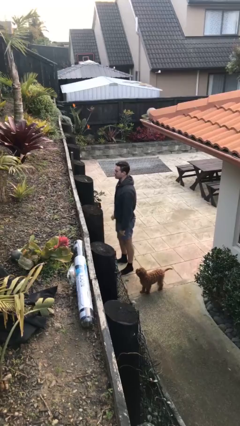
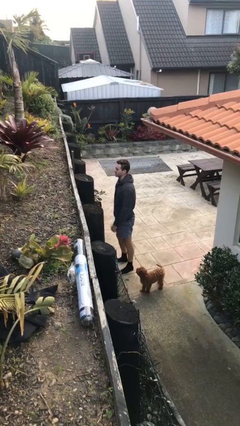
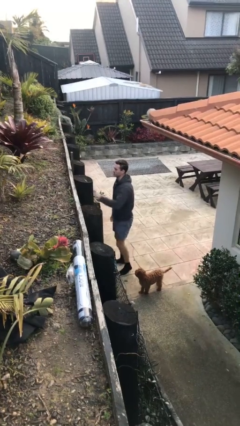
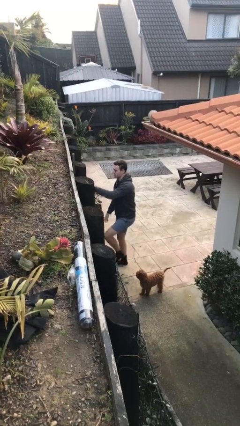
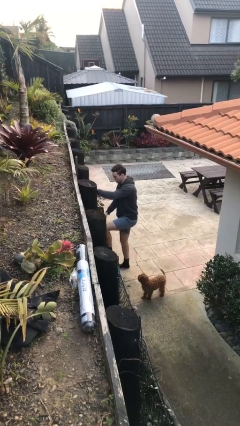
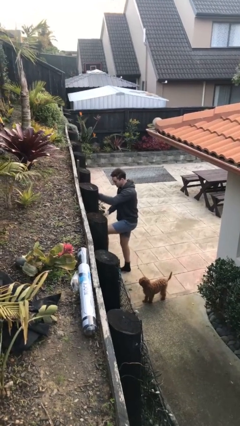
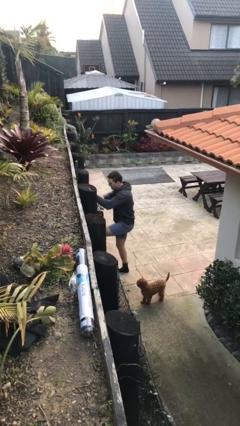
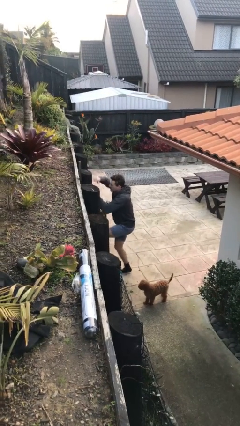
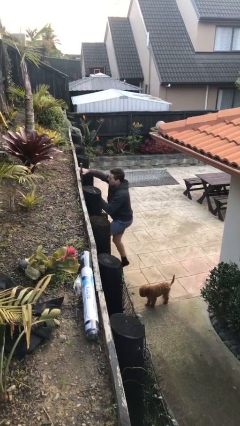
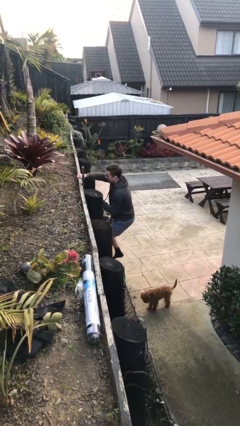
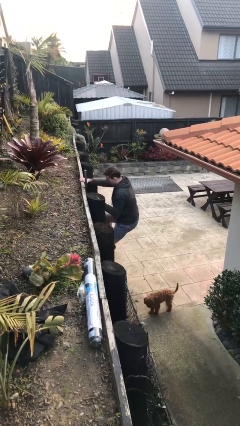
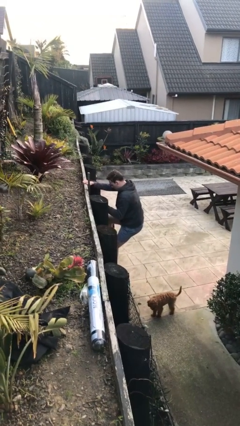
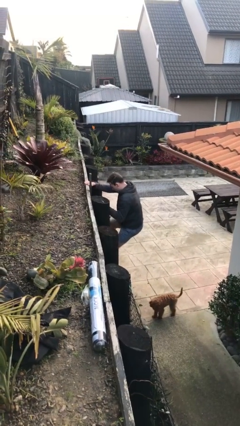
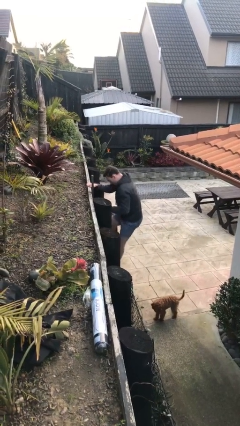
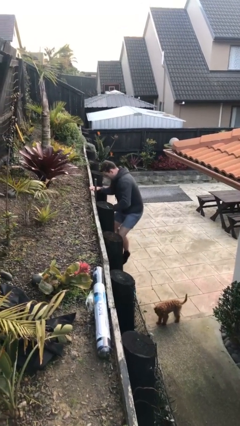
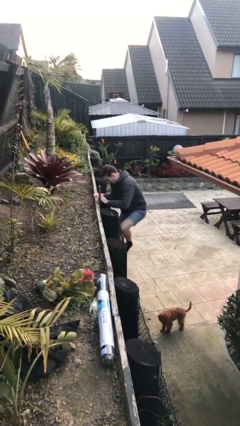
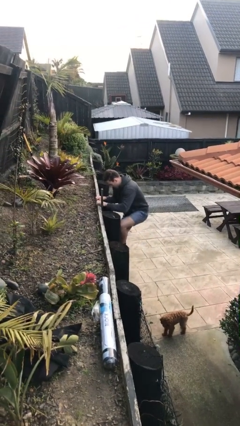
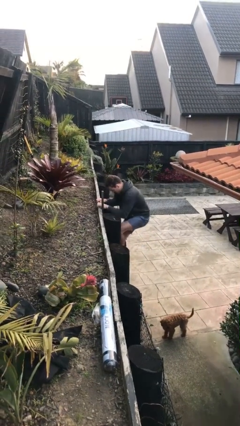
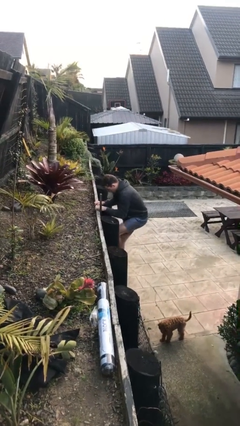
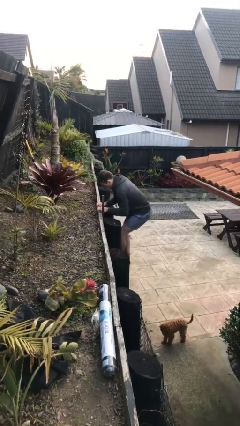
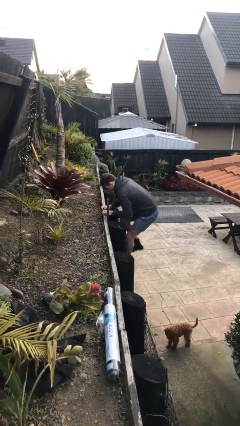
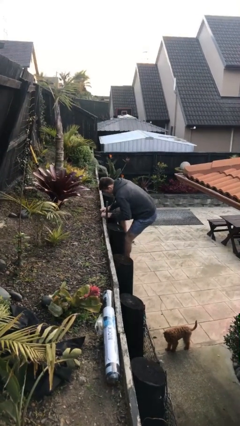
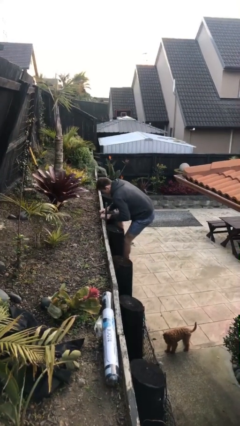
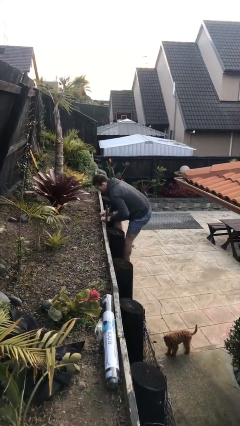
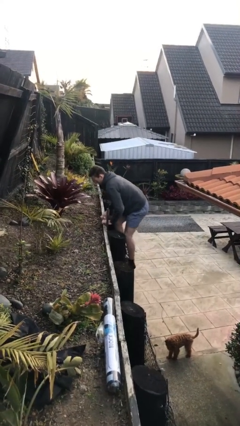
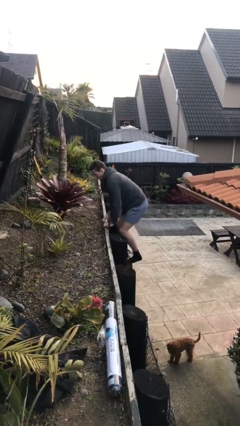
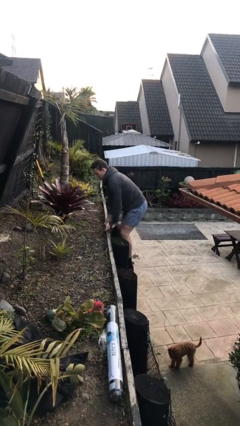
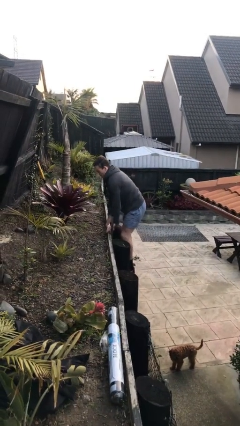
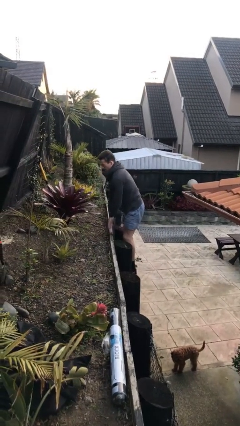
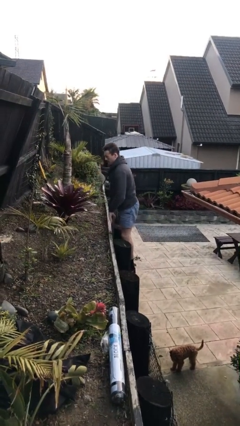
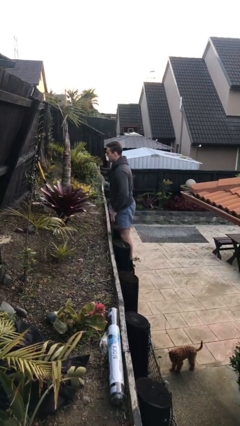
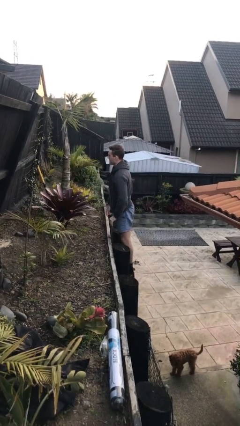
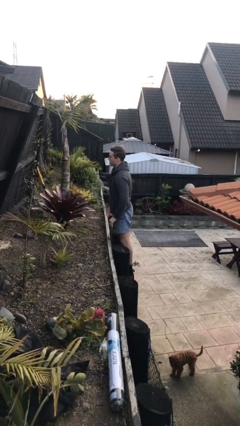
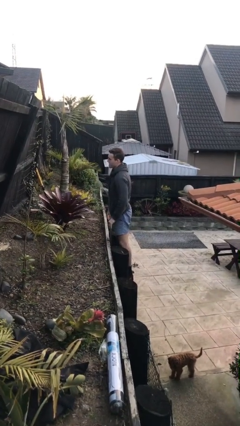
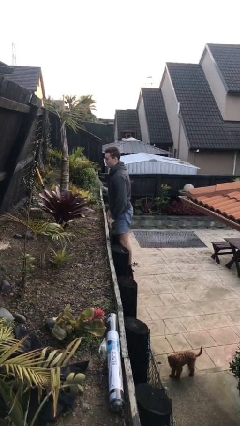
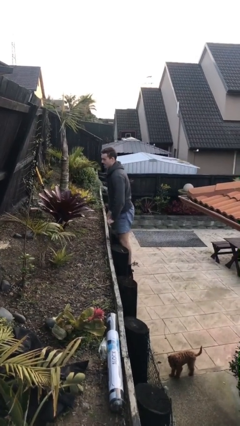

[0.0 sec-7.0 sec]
person climbs up ladder

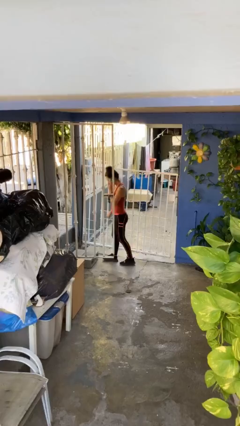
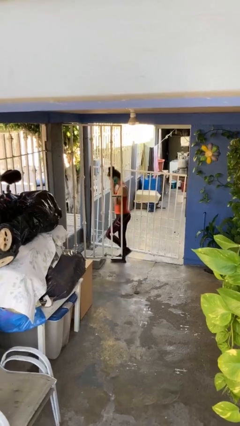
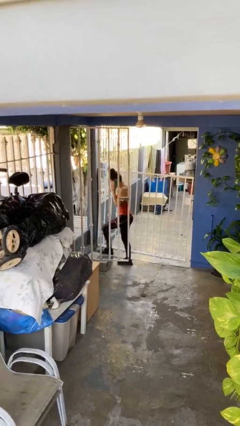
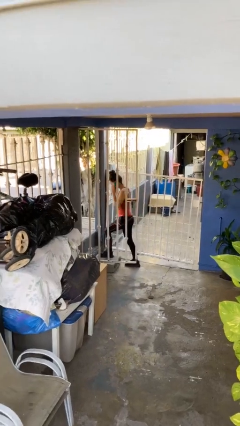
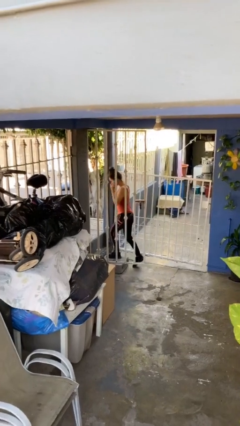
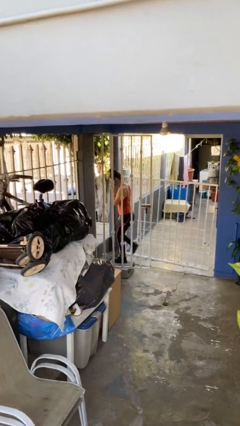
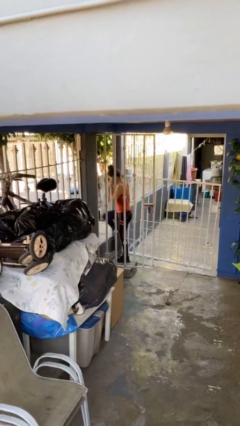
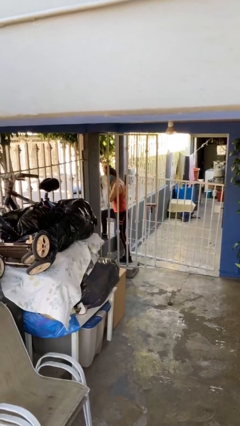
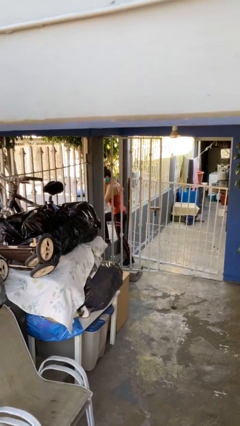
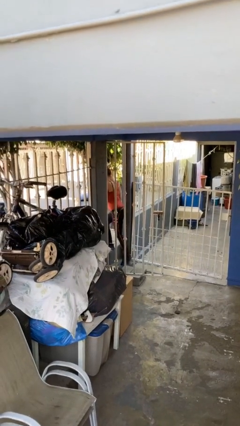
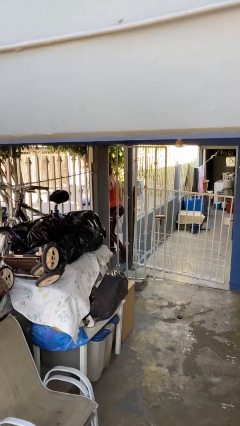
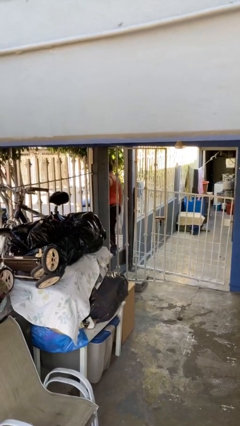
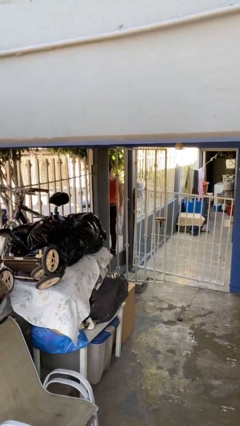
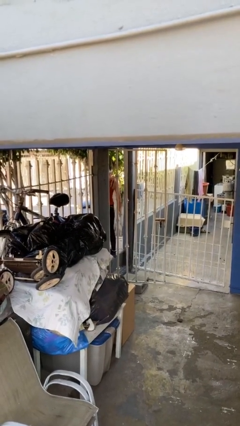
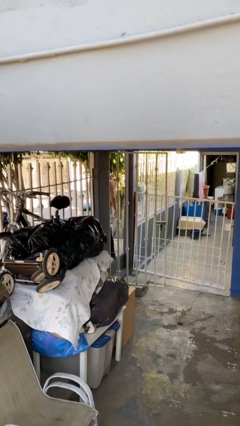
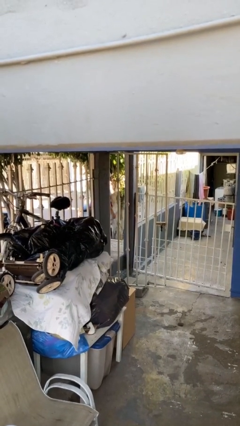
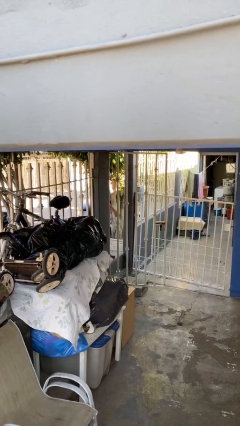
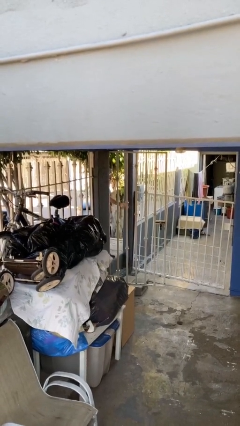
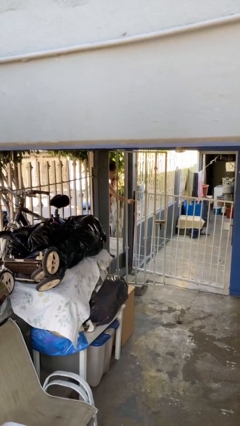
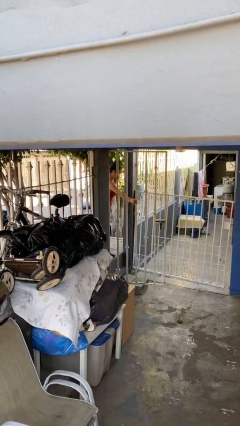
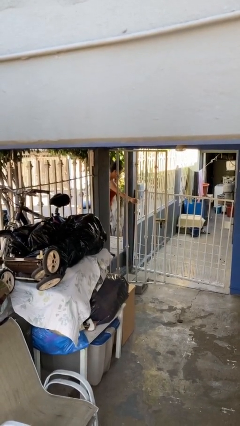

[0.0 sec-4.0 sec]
person exits scene through structure

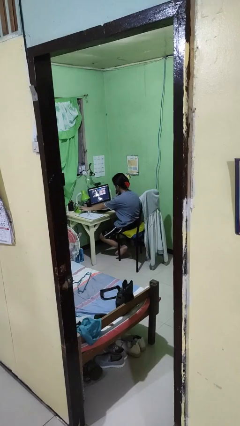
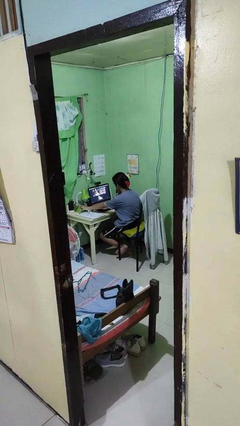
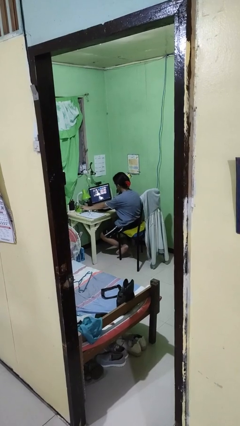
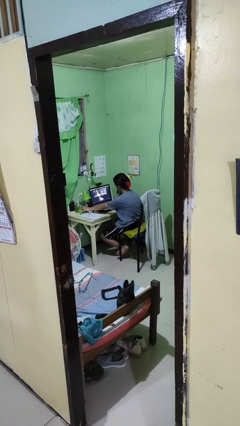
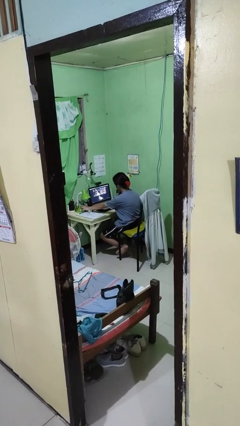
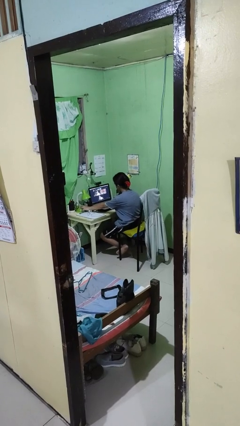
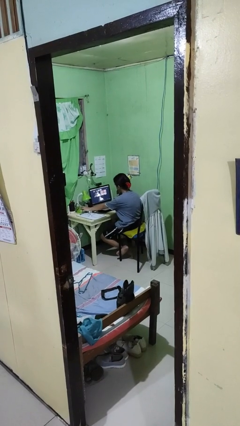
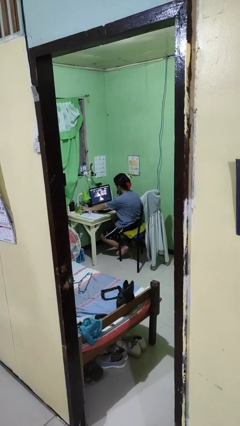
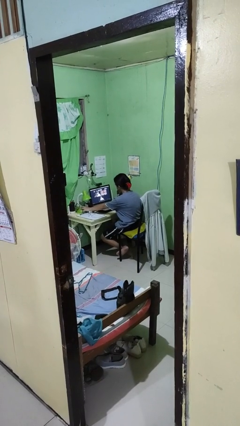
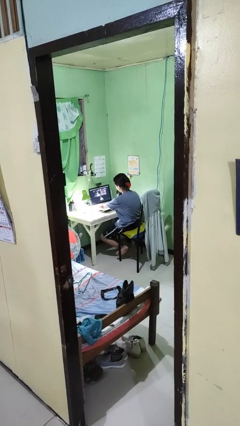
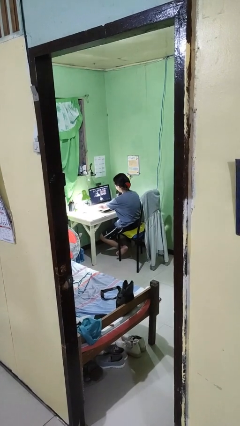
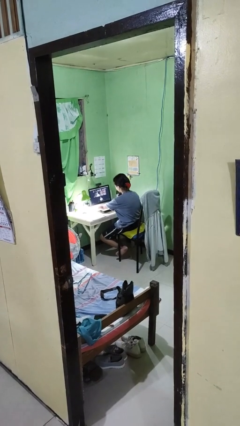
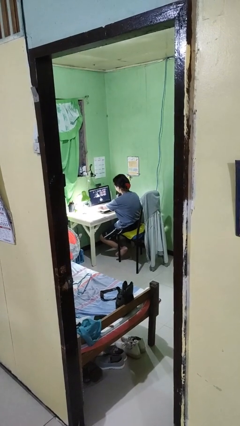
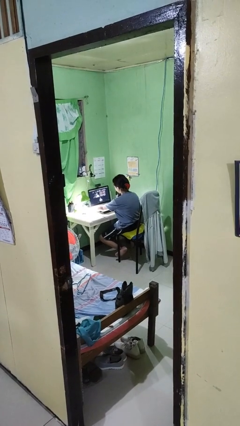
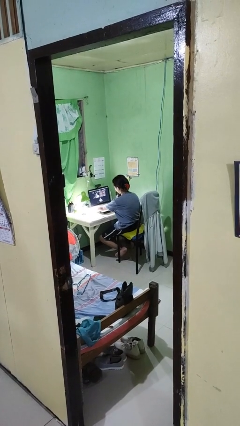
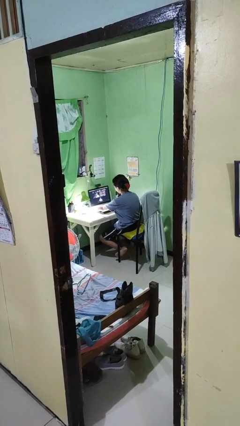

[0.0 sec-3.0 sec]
person turns on lamp

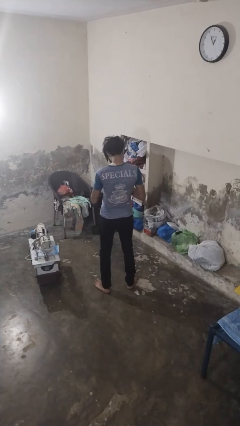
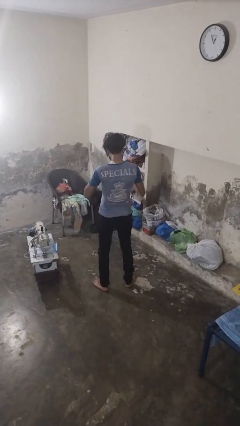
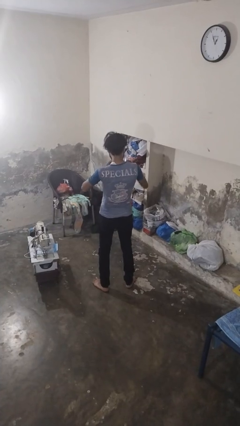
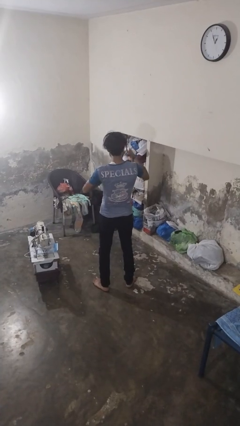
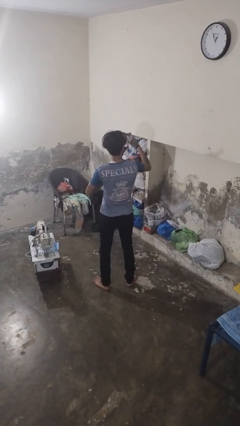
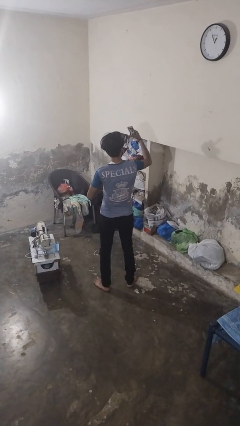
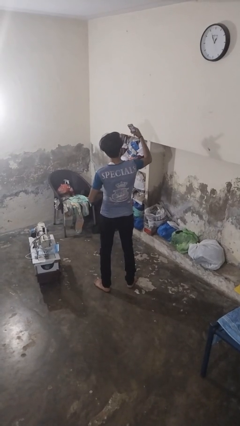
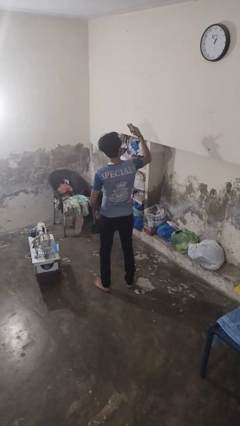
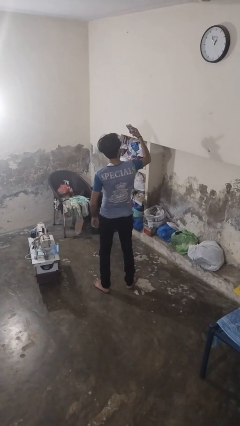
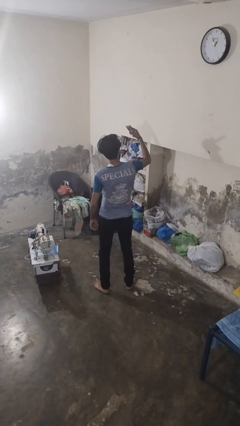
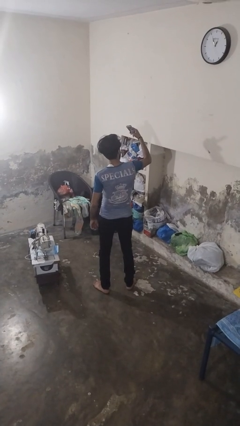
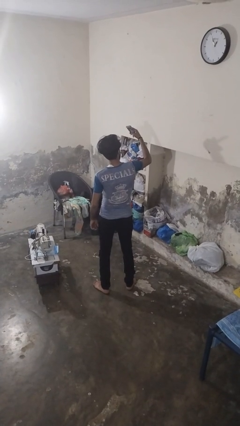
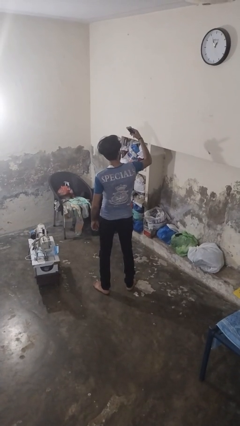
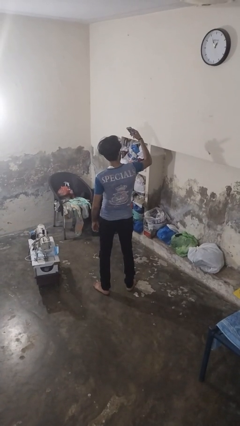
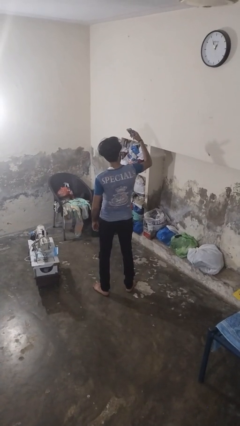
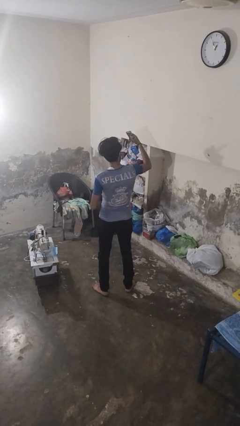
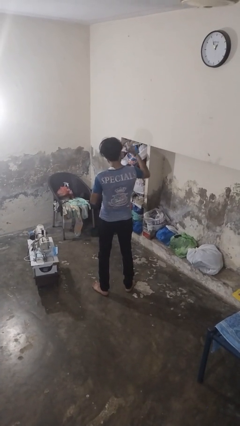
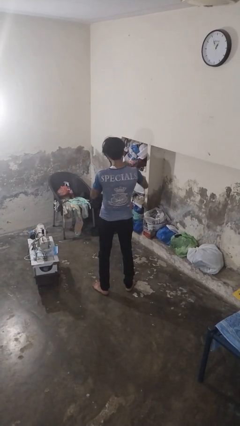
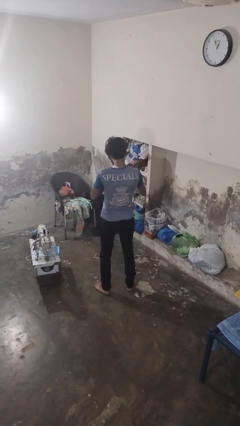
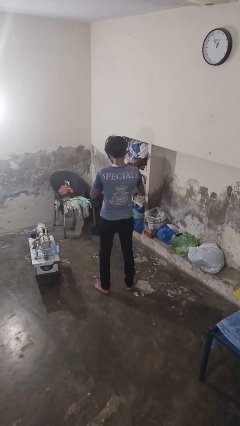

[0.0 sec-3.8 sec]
person takes selfie

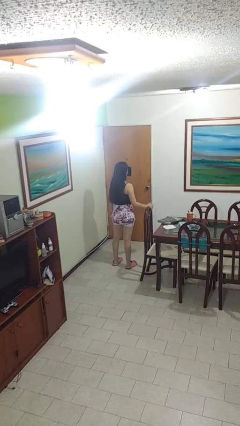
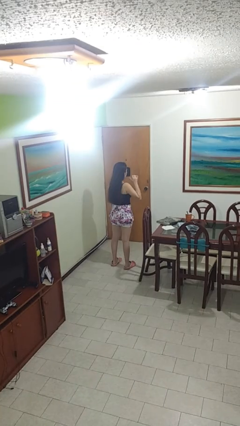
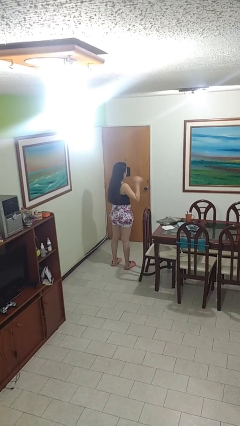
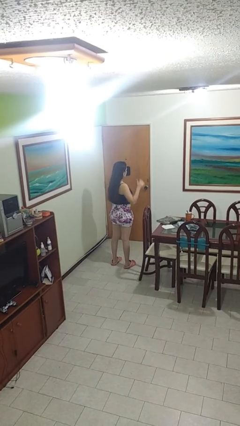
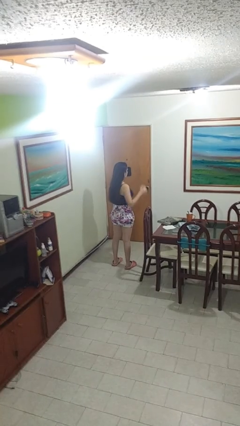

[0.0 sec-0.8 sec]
person gestures behind me
